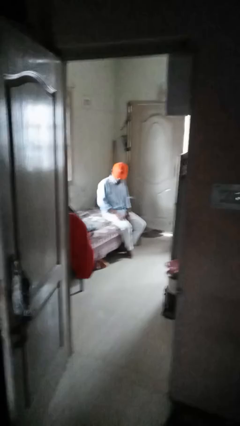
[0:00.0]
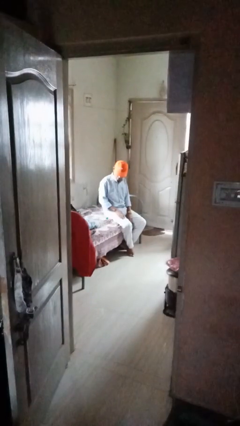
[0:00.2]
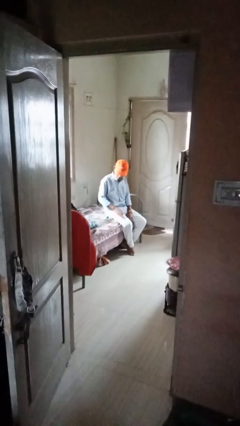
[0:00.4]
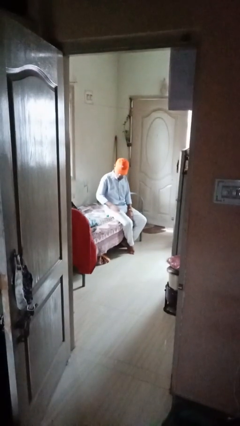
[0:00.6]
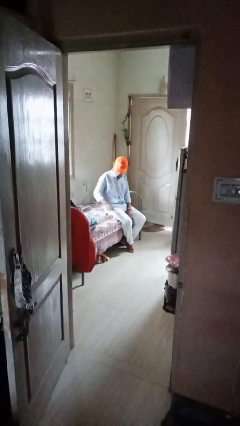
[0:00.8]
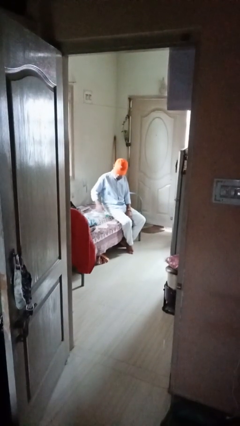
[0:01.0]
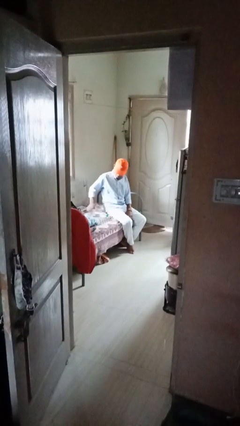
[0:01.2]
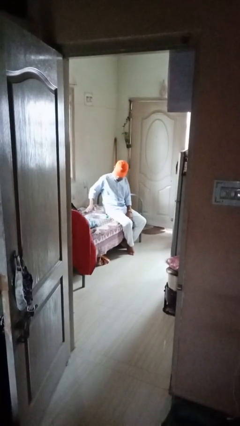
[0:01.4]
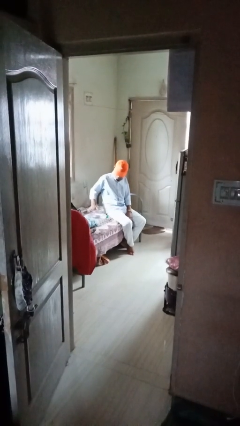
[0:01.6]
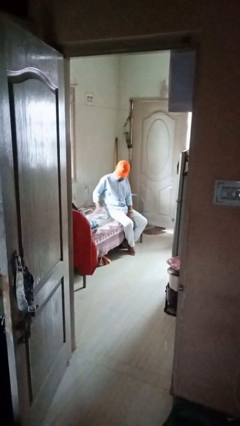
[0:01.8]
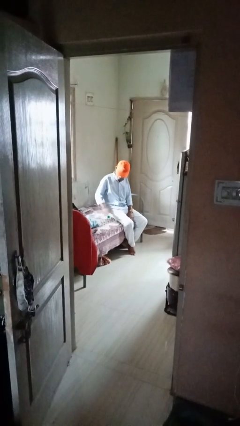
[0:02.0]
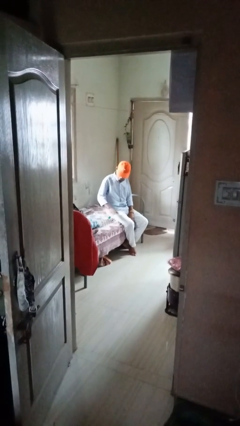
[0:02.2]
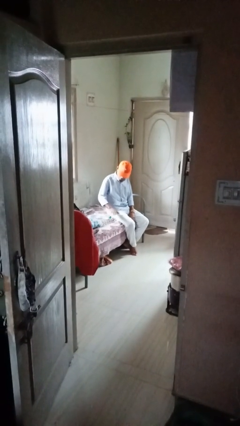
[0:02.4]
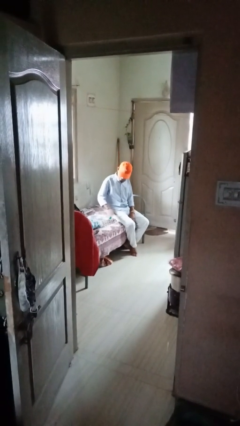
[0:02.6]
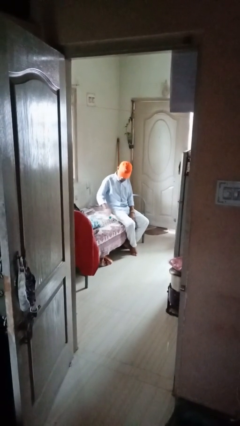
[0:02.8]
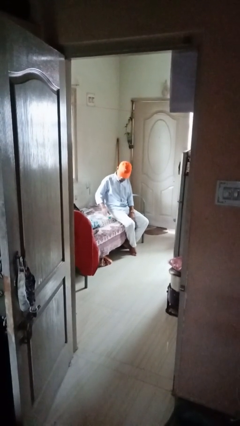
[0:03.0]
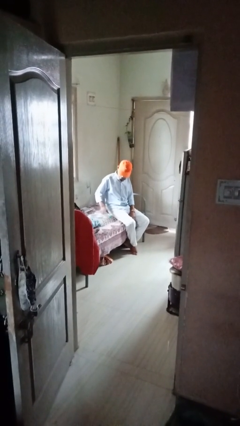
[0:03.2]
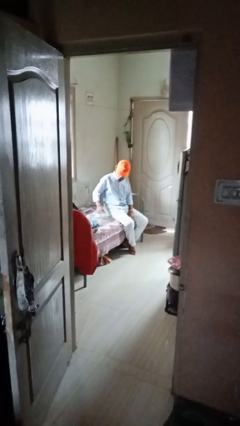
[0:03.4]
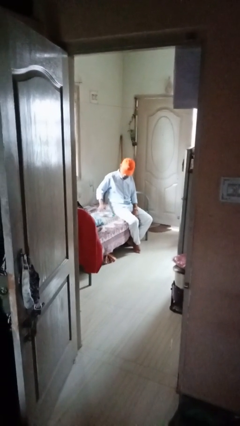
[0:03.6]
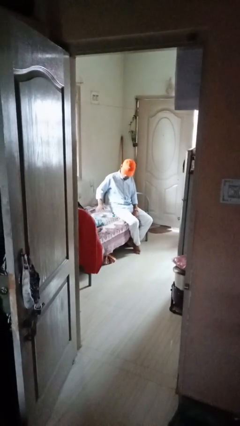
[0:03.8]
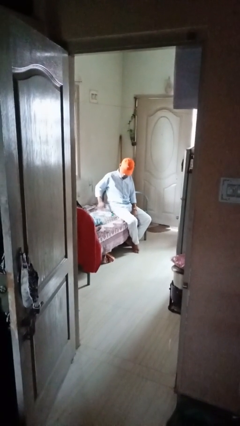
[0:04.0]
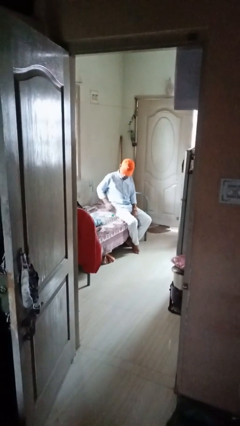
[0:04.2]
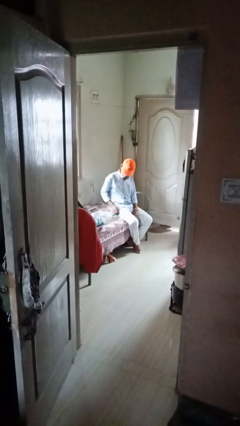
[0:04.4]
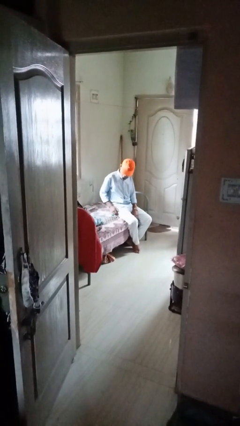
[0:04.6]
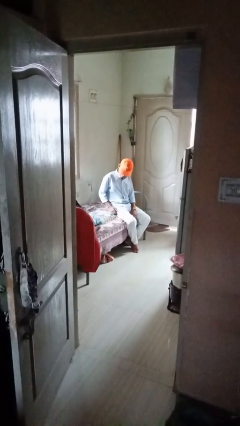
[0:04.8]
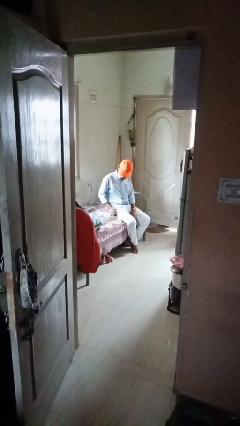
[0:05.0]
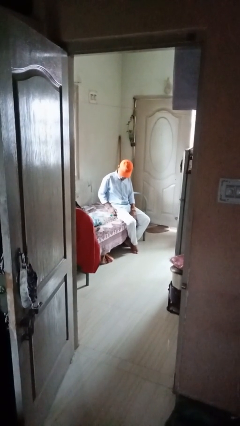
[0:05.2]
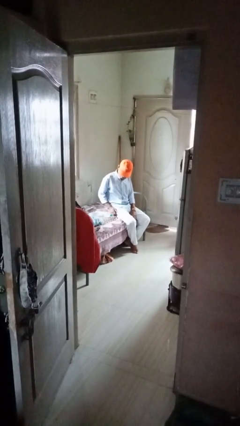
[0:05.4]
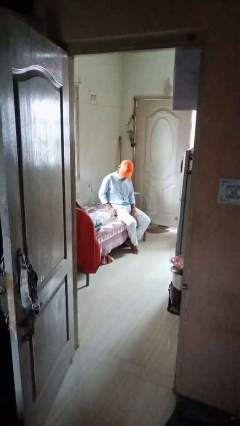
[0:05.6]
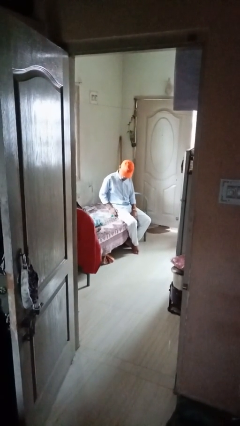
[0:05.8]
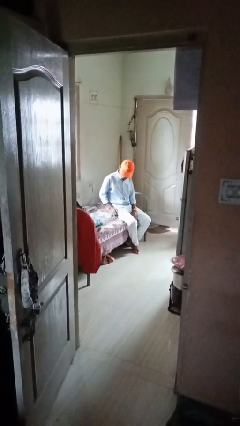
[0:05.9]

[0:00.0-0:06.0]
person waves hand over object

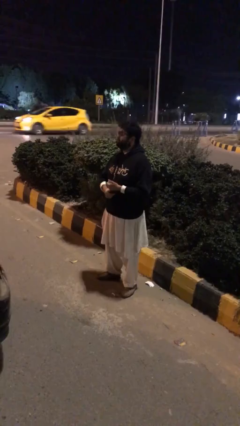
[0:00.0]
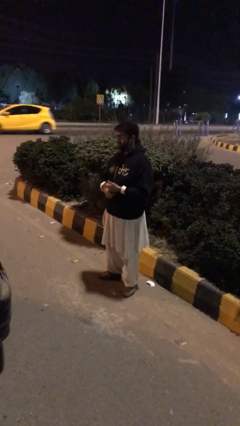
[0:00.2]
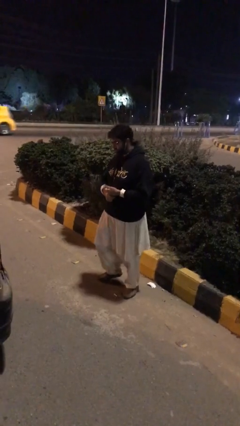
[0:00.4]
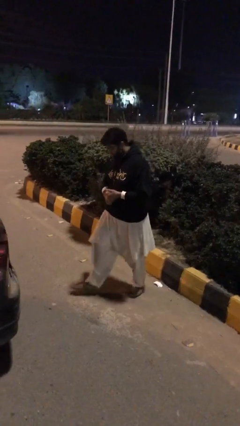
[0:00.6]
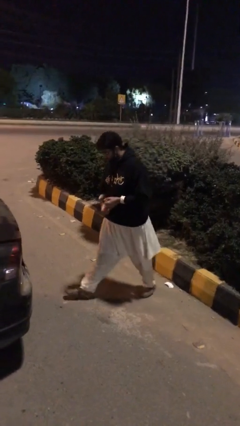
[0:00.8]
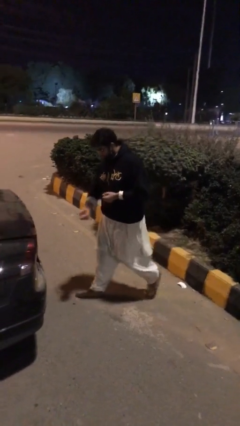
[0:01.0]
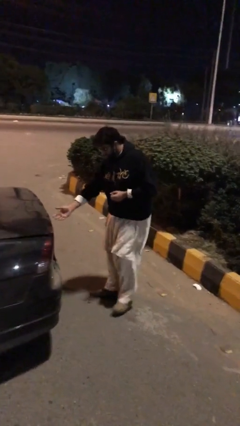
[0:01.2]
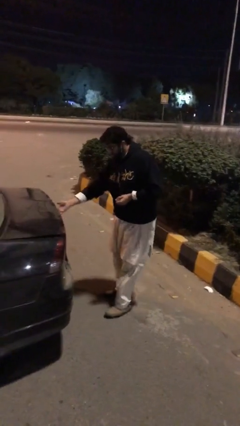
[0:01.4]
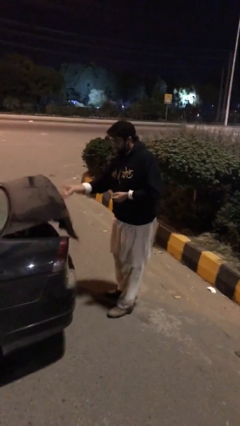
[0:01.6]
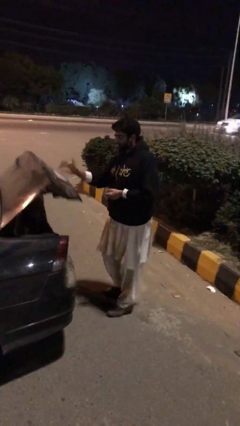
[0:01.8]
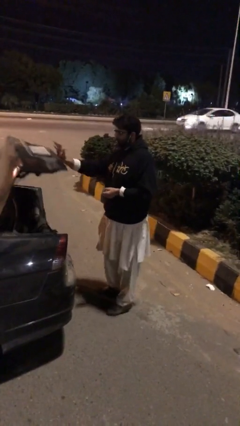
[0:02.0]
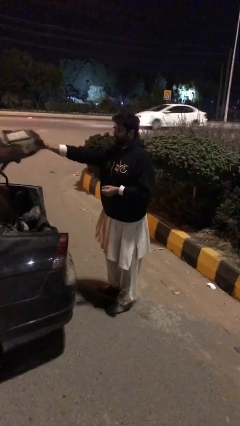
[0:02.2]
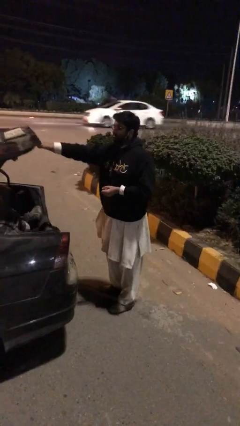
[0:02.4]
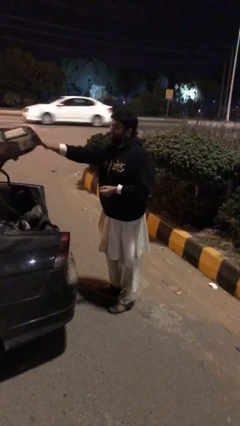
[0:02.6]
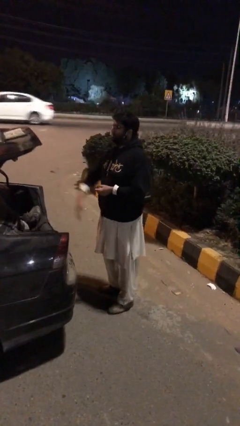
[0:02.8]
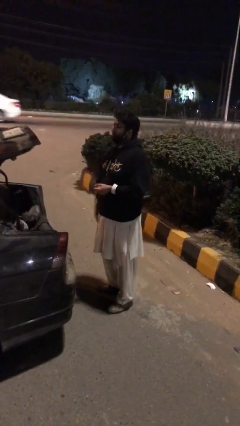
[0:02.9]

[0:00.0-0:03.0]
person opens car trunk

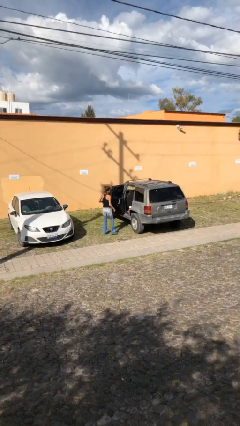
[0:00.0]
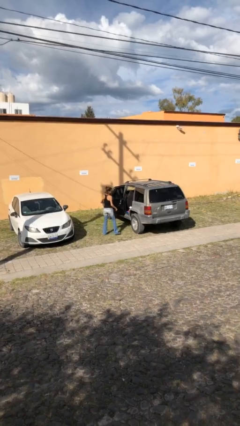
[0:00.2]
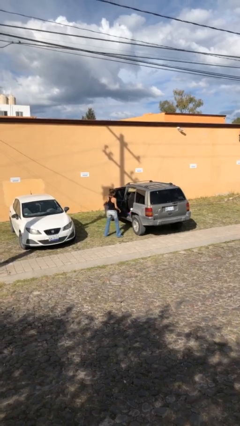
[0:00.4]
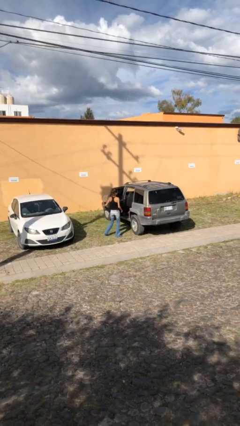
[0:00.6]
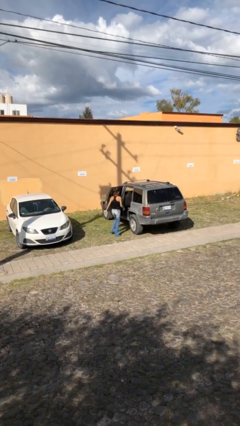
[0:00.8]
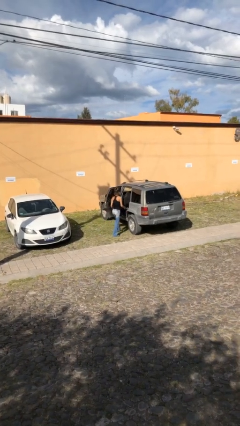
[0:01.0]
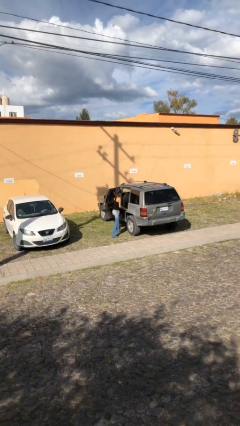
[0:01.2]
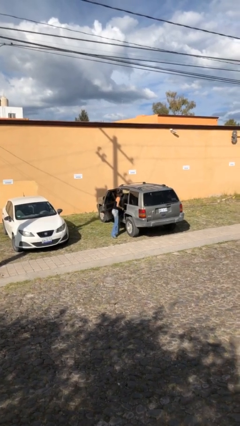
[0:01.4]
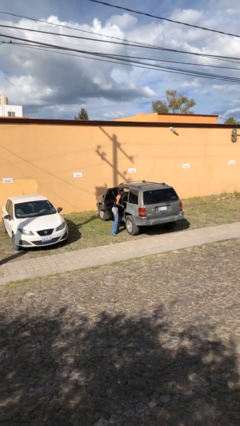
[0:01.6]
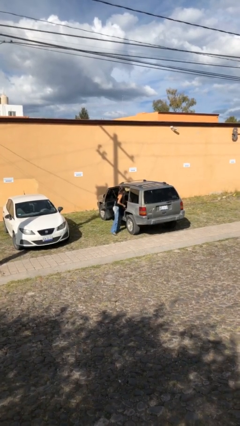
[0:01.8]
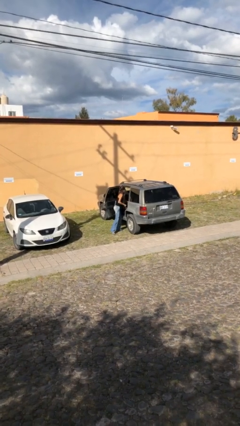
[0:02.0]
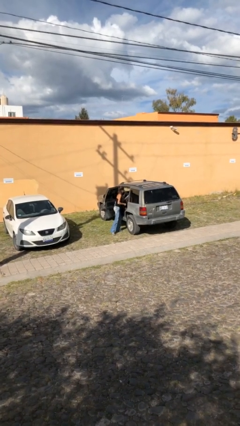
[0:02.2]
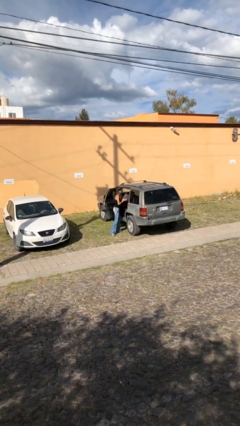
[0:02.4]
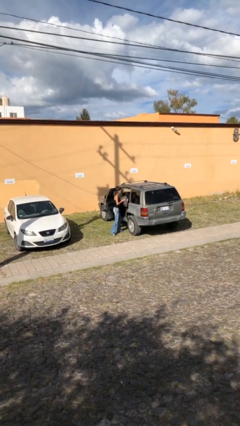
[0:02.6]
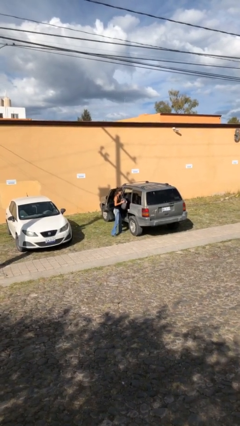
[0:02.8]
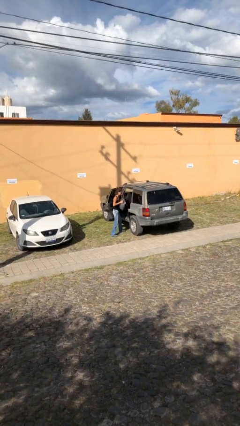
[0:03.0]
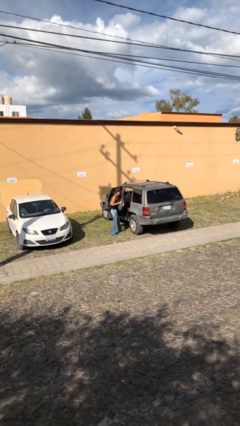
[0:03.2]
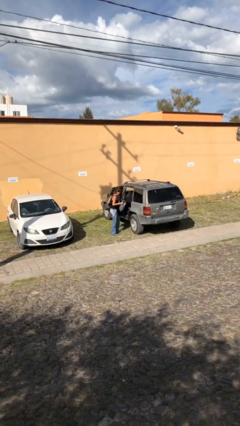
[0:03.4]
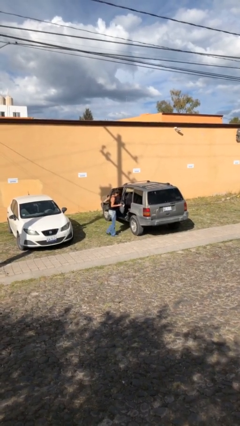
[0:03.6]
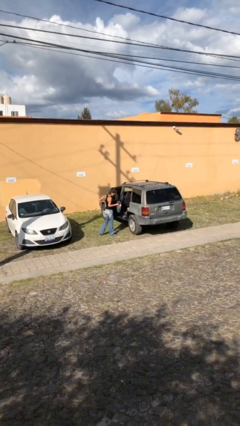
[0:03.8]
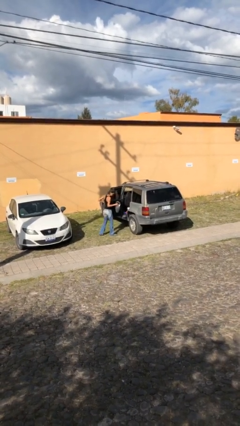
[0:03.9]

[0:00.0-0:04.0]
person unloads car

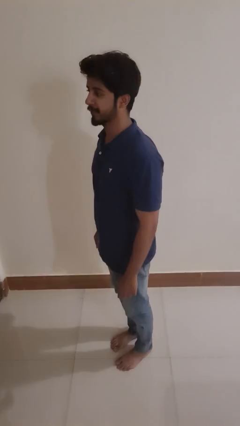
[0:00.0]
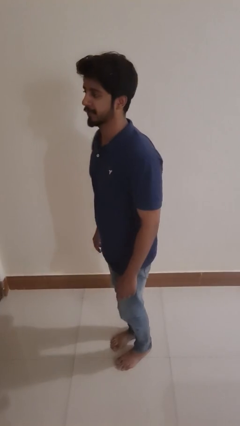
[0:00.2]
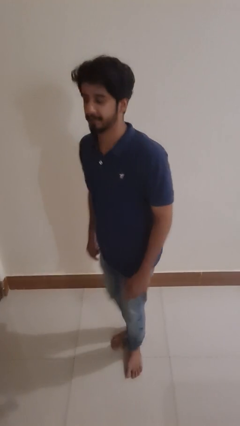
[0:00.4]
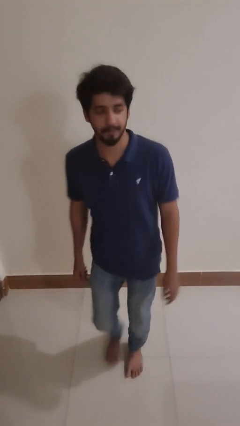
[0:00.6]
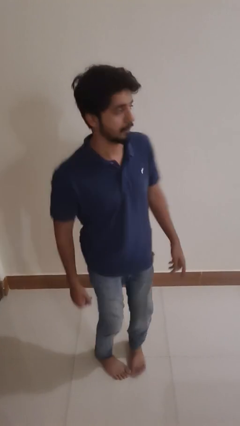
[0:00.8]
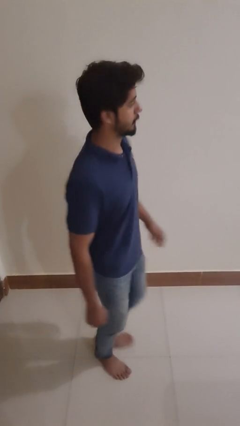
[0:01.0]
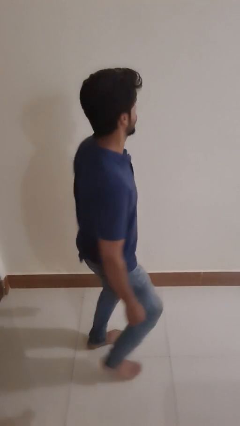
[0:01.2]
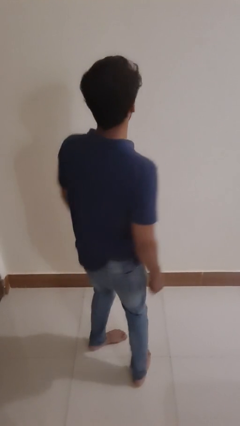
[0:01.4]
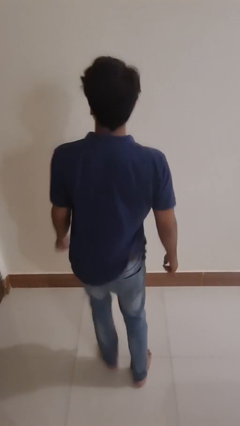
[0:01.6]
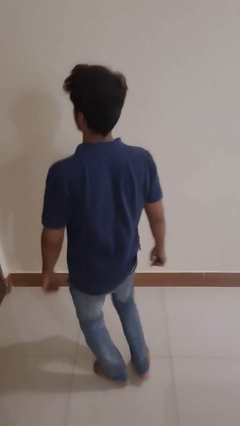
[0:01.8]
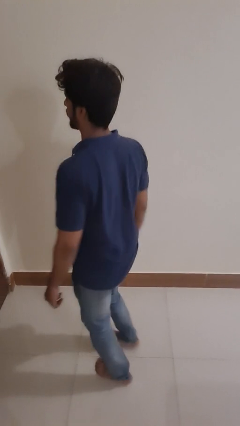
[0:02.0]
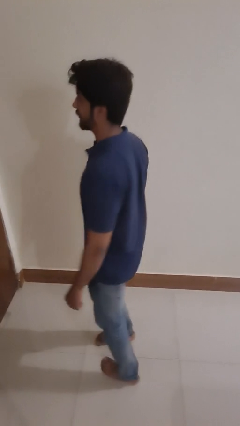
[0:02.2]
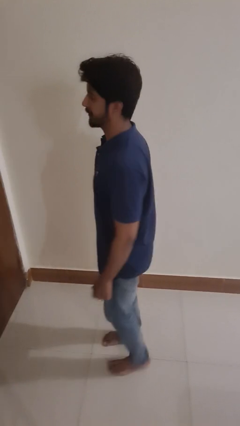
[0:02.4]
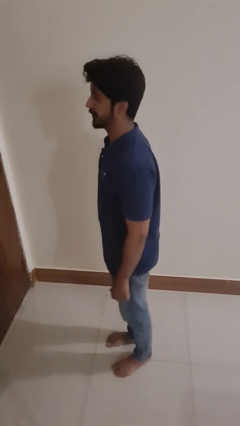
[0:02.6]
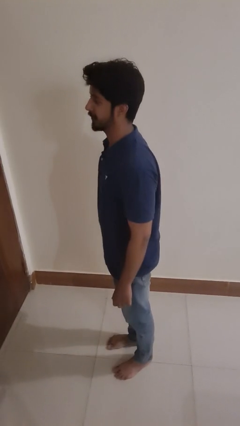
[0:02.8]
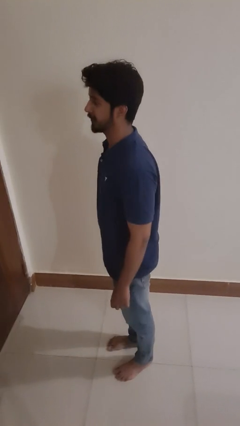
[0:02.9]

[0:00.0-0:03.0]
person twirls

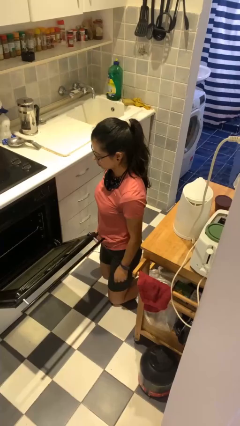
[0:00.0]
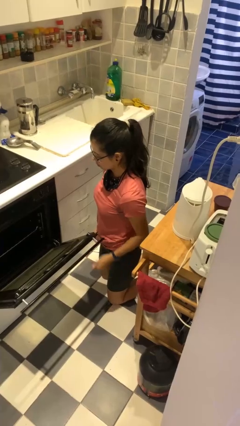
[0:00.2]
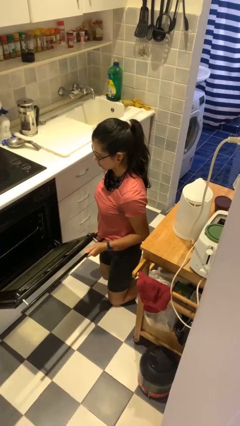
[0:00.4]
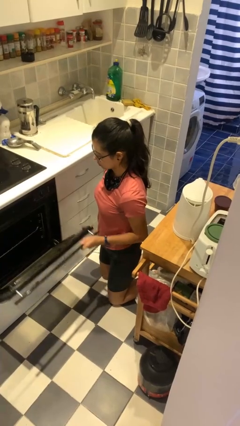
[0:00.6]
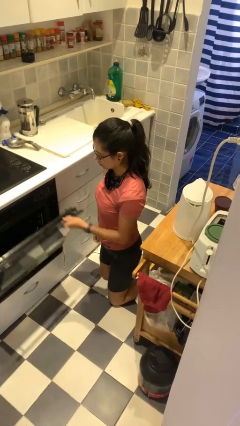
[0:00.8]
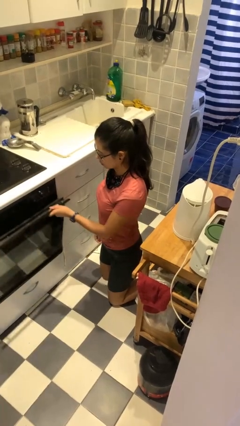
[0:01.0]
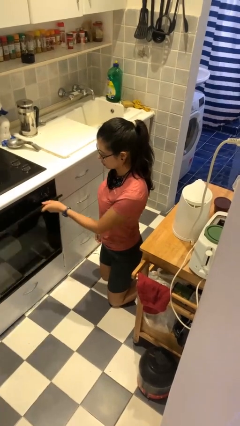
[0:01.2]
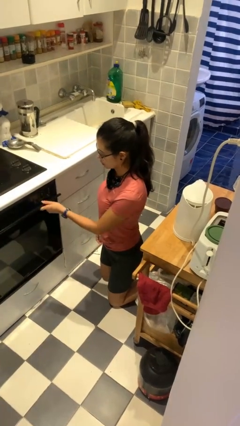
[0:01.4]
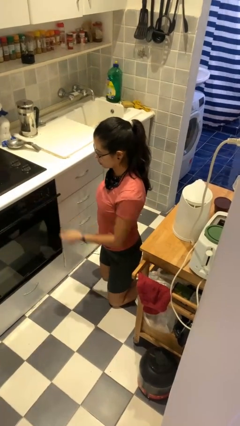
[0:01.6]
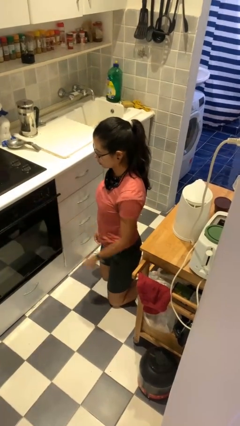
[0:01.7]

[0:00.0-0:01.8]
person closes oven door
